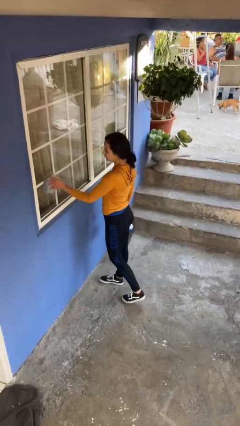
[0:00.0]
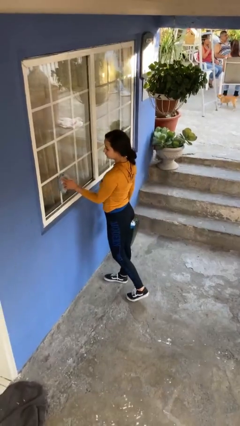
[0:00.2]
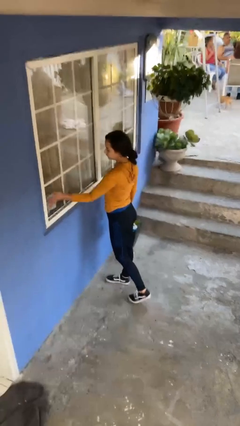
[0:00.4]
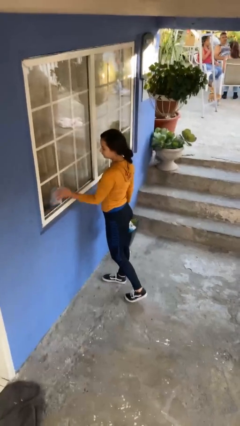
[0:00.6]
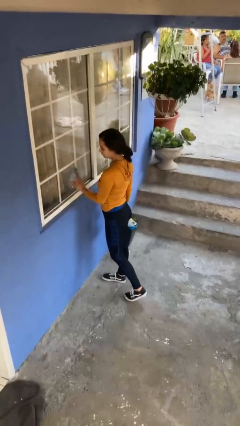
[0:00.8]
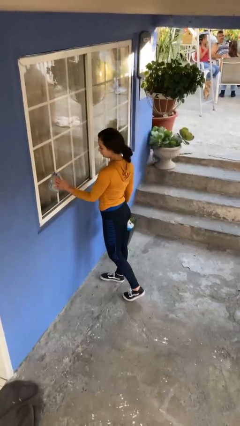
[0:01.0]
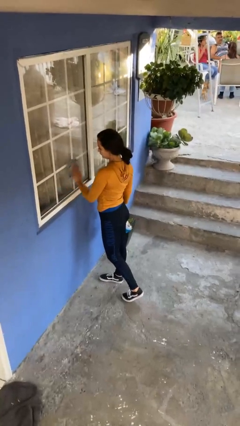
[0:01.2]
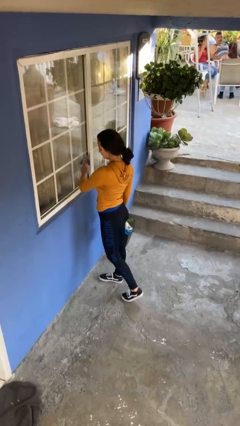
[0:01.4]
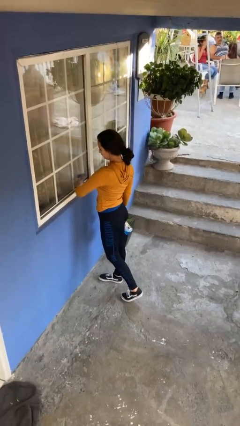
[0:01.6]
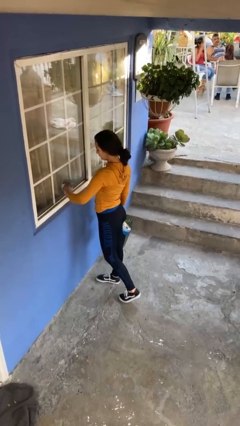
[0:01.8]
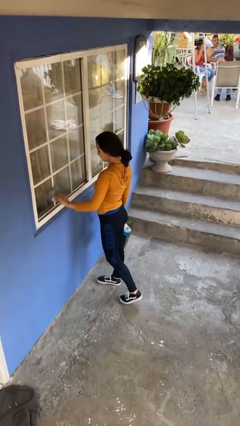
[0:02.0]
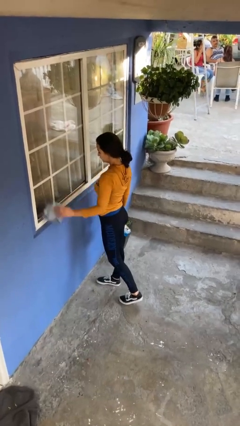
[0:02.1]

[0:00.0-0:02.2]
person washes window

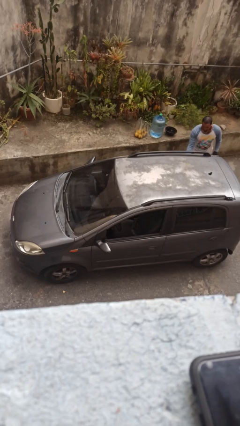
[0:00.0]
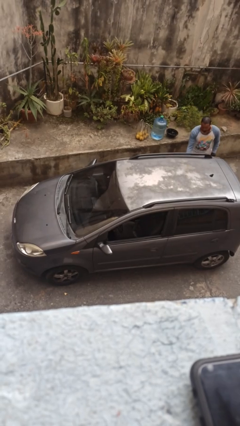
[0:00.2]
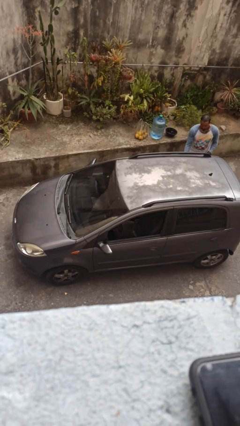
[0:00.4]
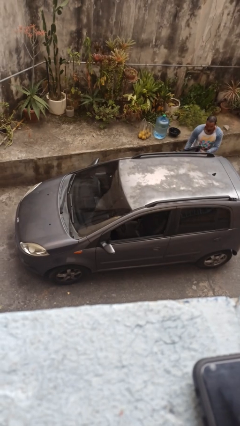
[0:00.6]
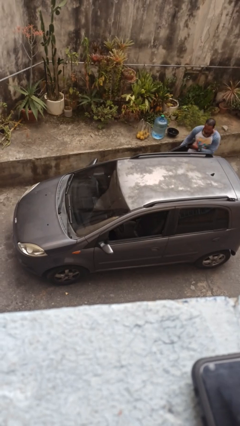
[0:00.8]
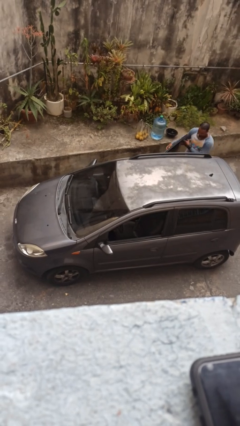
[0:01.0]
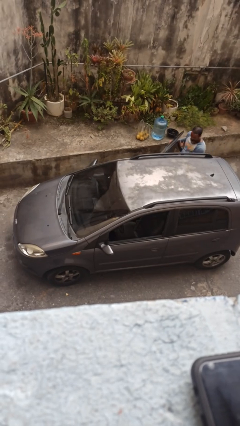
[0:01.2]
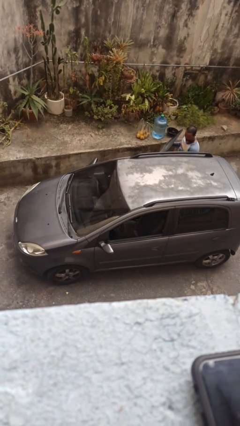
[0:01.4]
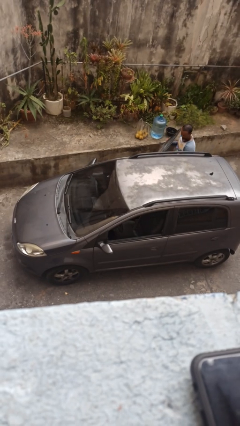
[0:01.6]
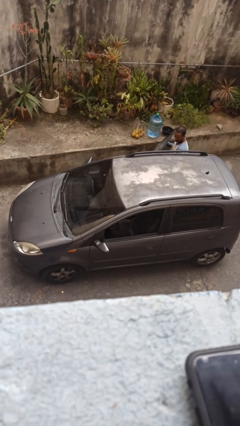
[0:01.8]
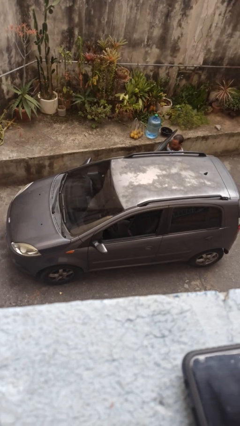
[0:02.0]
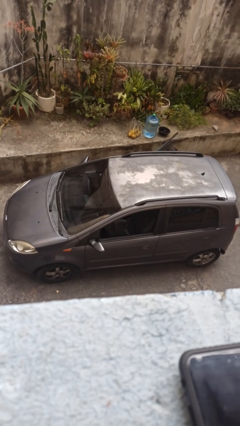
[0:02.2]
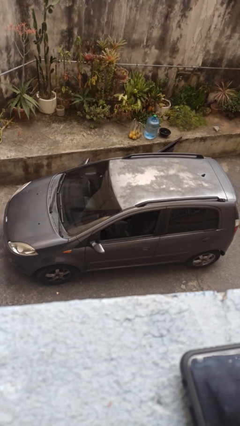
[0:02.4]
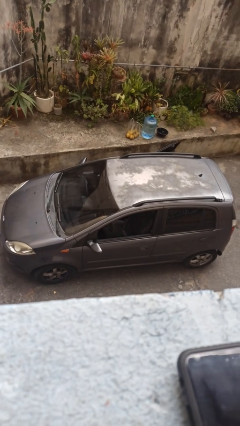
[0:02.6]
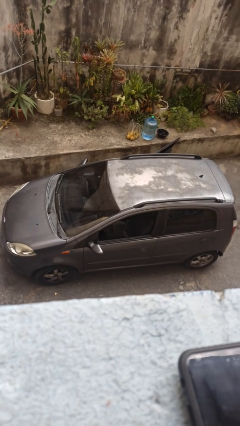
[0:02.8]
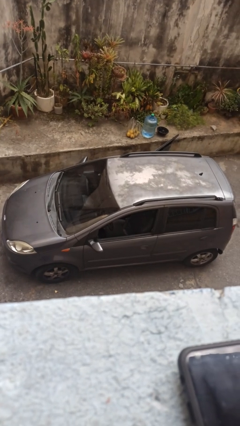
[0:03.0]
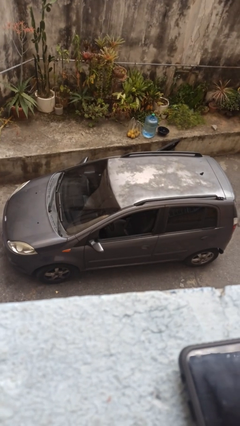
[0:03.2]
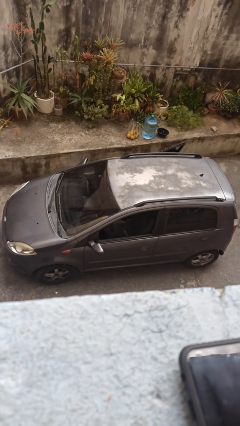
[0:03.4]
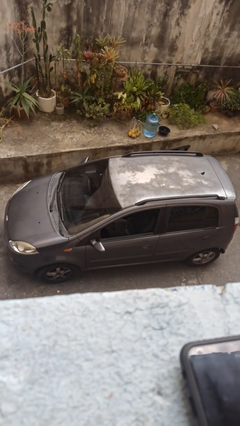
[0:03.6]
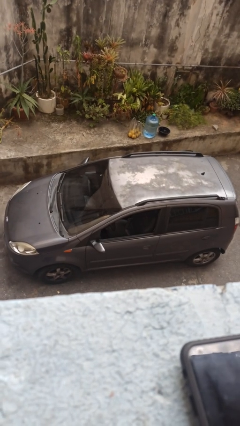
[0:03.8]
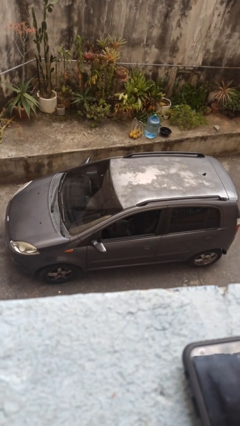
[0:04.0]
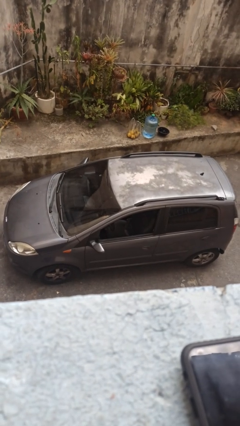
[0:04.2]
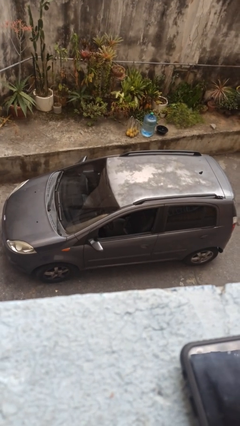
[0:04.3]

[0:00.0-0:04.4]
car picks up person

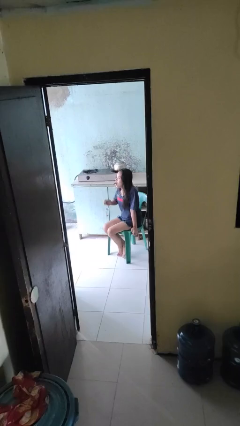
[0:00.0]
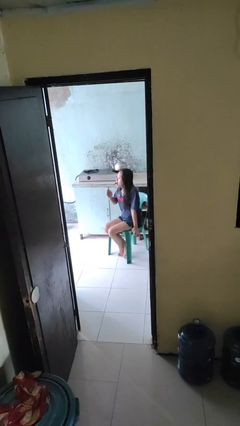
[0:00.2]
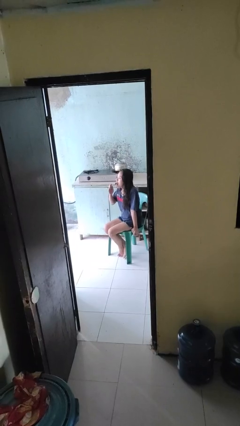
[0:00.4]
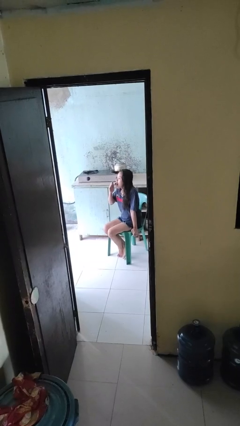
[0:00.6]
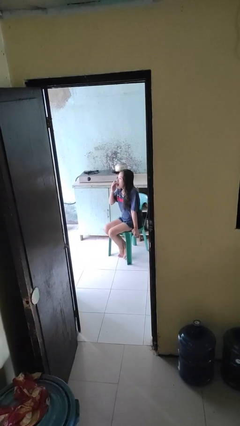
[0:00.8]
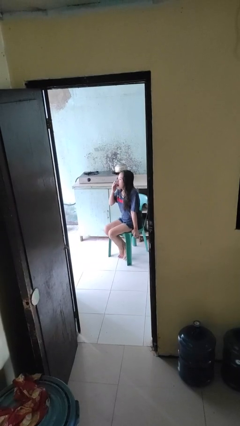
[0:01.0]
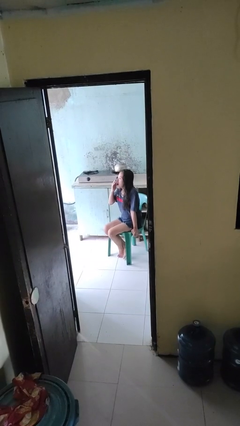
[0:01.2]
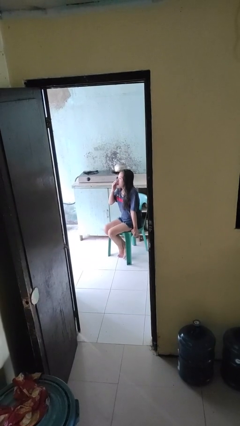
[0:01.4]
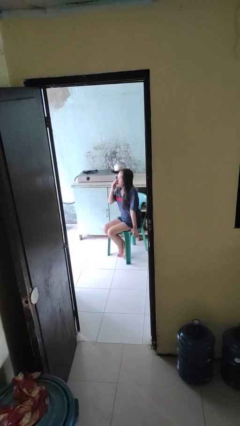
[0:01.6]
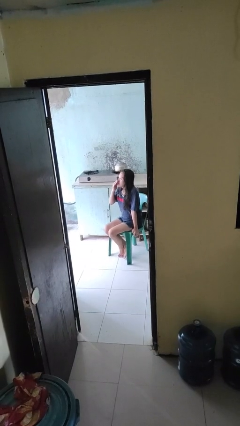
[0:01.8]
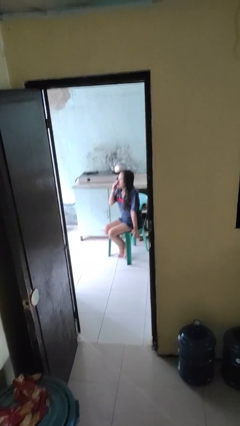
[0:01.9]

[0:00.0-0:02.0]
person yawns

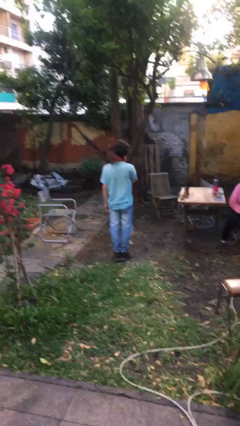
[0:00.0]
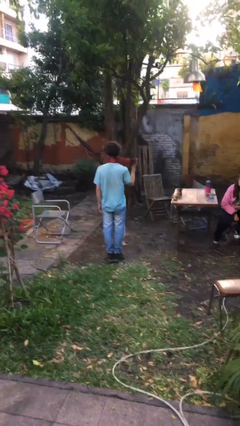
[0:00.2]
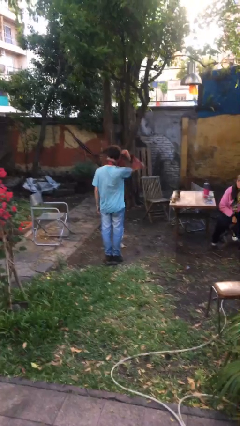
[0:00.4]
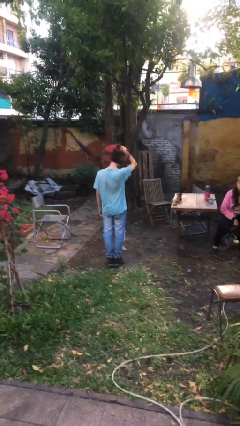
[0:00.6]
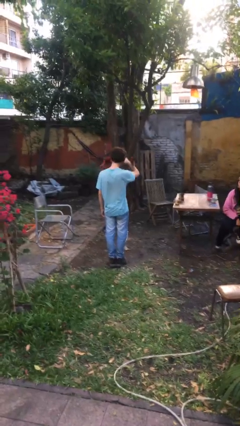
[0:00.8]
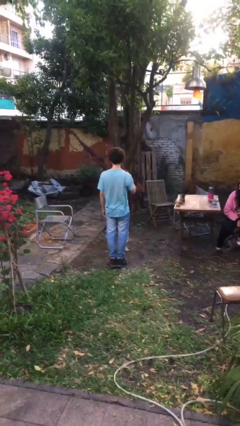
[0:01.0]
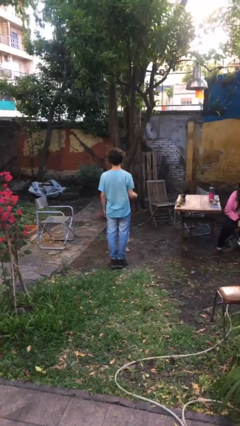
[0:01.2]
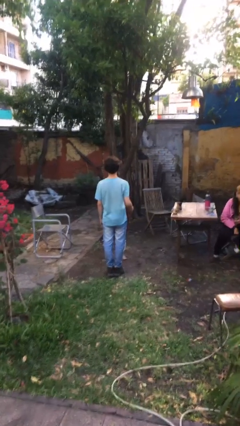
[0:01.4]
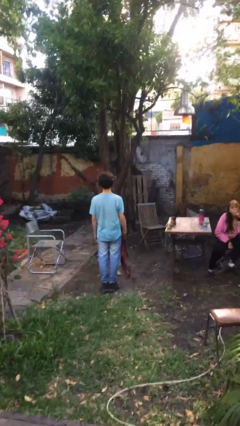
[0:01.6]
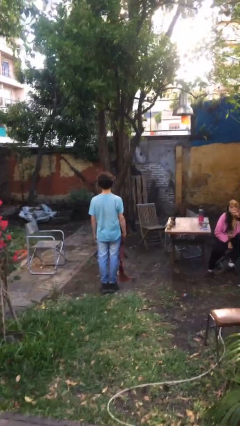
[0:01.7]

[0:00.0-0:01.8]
person takes off scarf

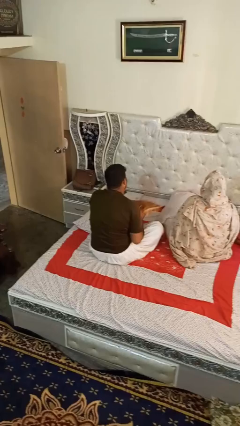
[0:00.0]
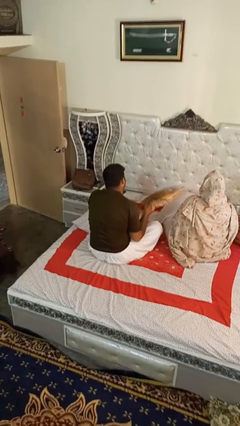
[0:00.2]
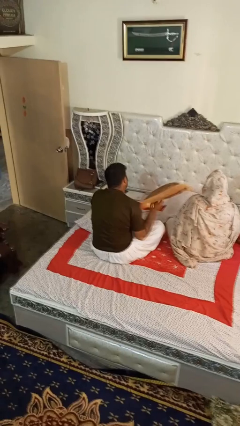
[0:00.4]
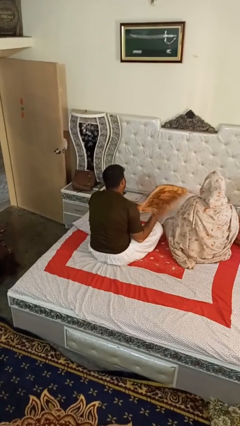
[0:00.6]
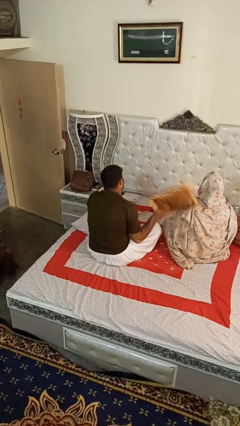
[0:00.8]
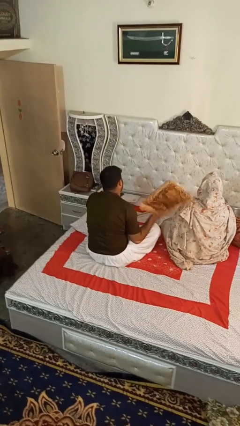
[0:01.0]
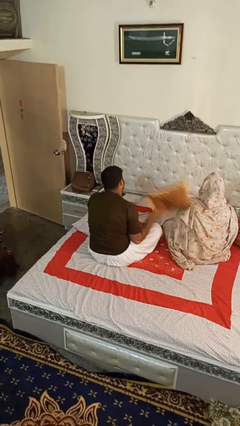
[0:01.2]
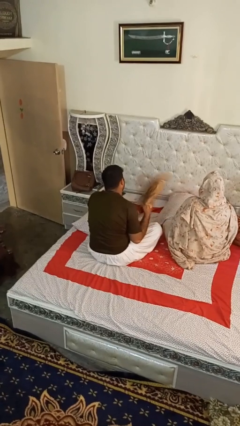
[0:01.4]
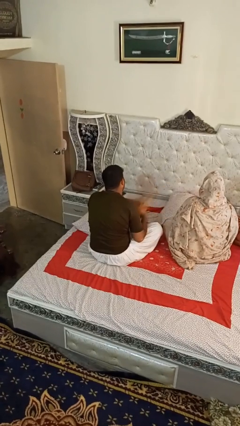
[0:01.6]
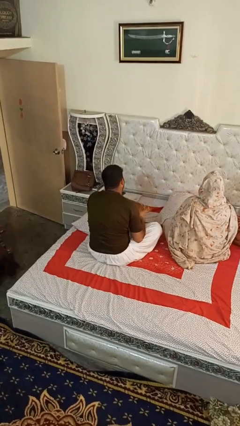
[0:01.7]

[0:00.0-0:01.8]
person hits person with pillow

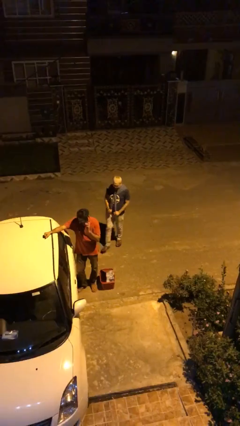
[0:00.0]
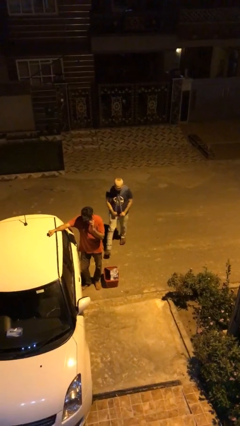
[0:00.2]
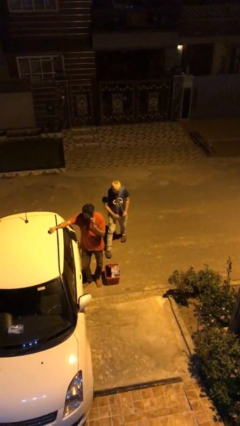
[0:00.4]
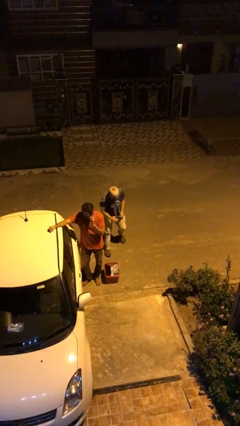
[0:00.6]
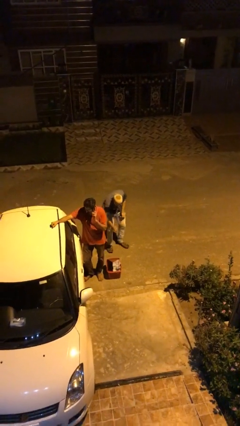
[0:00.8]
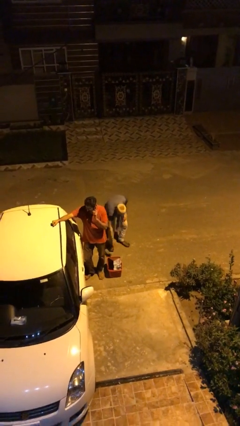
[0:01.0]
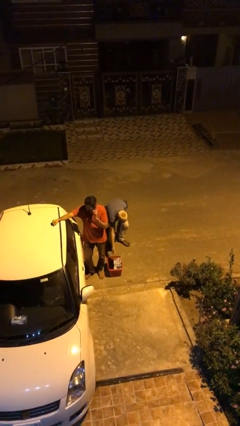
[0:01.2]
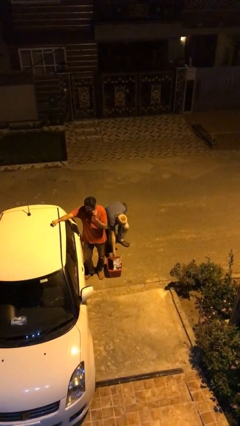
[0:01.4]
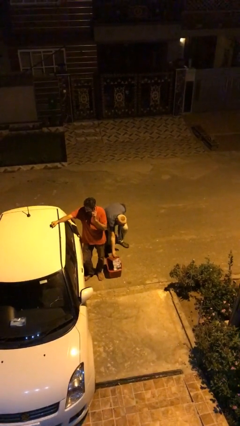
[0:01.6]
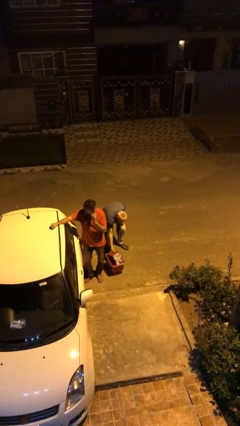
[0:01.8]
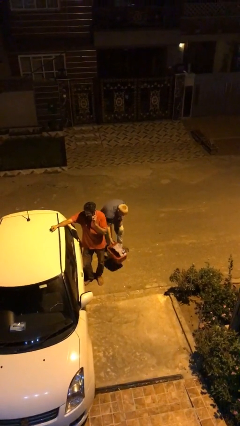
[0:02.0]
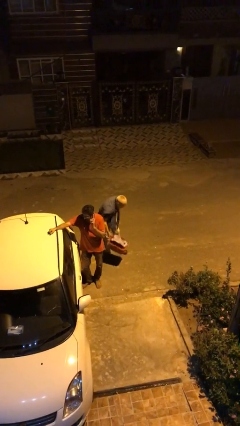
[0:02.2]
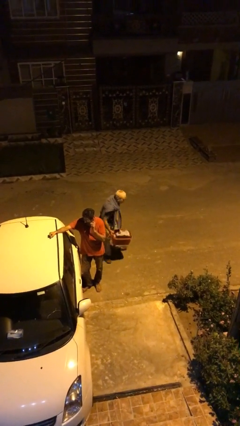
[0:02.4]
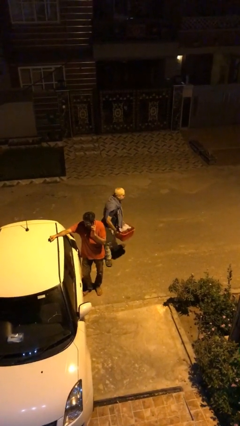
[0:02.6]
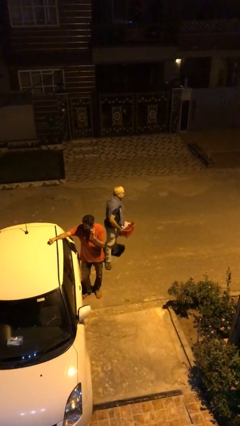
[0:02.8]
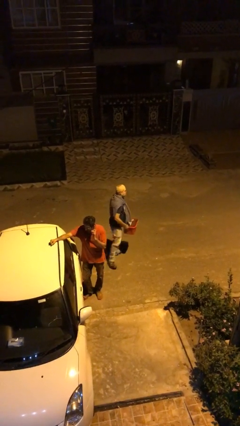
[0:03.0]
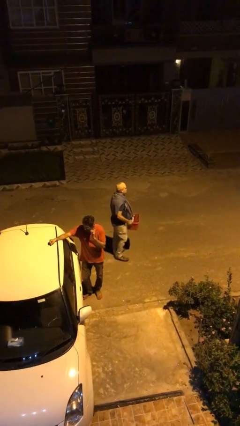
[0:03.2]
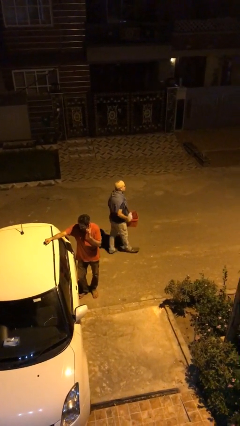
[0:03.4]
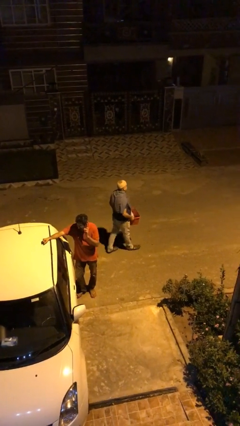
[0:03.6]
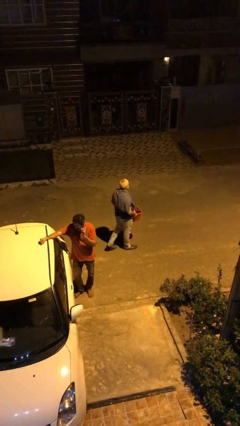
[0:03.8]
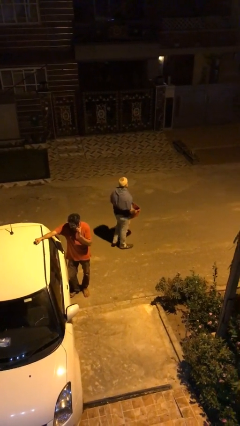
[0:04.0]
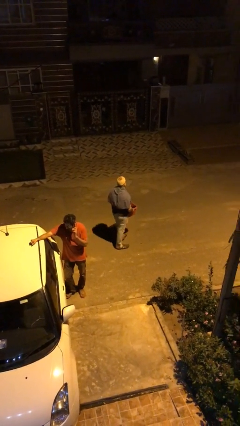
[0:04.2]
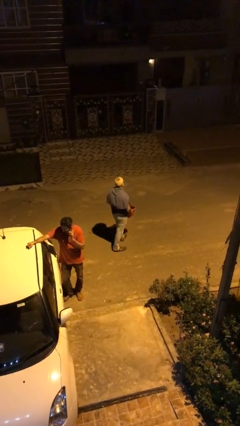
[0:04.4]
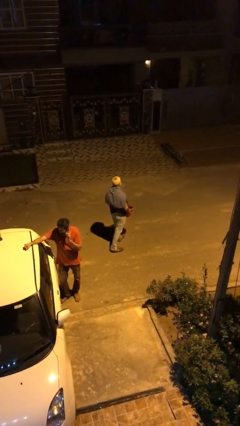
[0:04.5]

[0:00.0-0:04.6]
person steals object from person

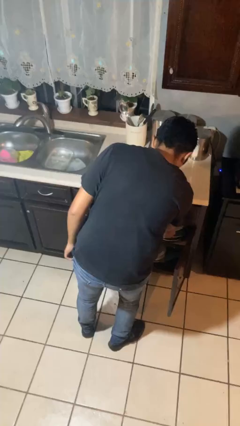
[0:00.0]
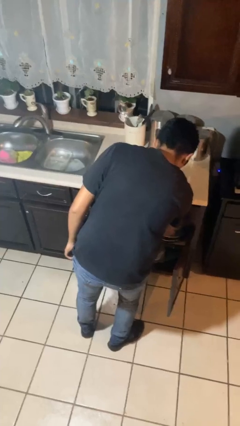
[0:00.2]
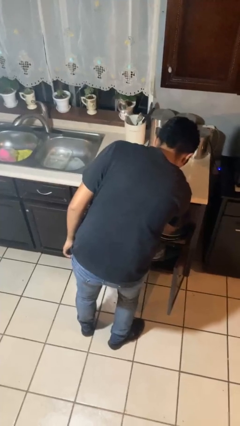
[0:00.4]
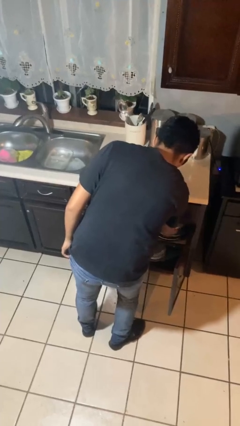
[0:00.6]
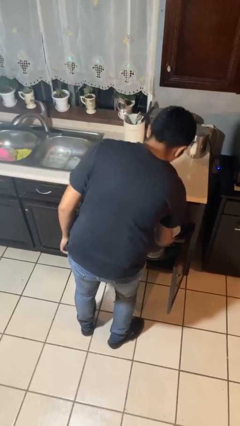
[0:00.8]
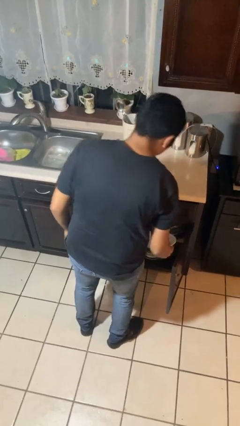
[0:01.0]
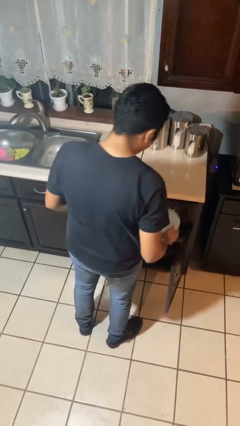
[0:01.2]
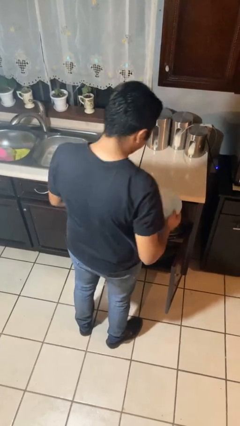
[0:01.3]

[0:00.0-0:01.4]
person puts object in cabinet
